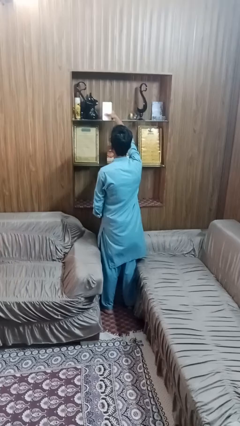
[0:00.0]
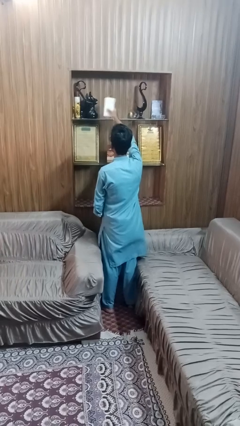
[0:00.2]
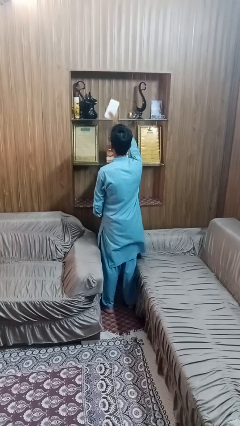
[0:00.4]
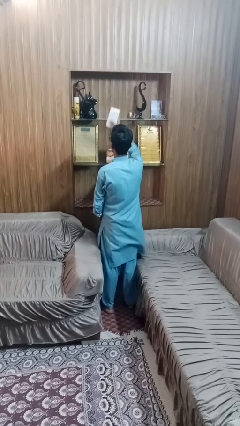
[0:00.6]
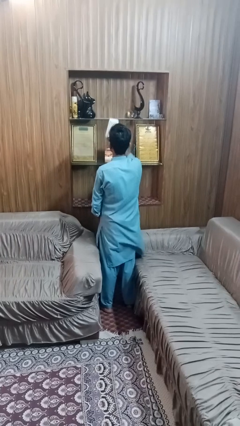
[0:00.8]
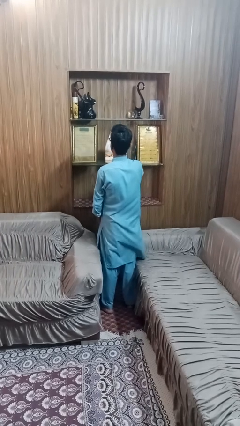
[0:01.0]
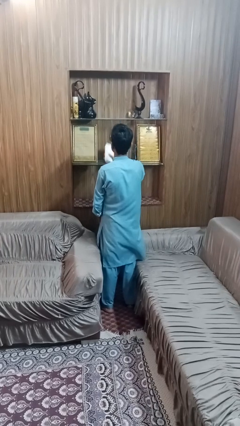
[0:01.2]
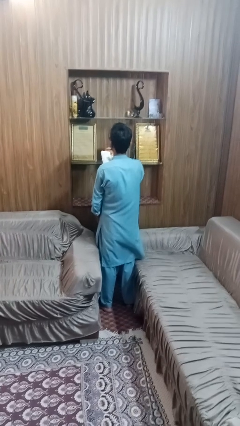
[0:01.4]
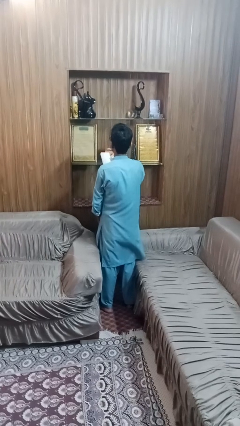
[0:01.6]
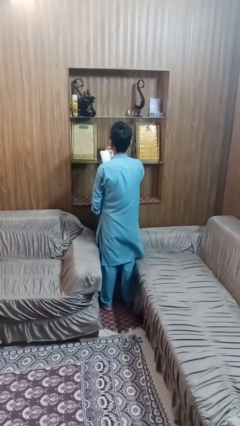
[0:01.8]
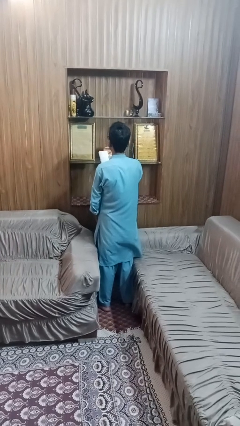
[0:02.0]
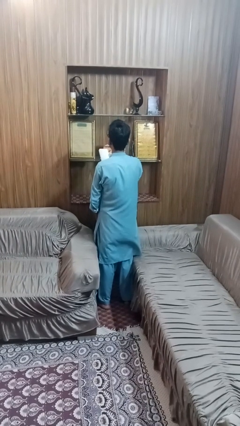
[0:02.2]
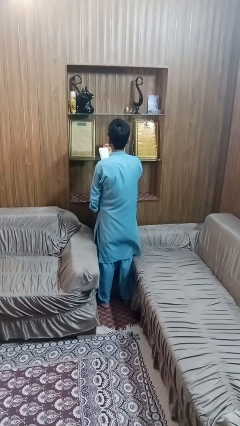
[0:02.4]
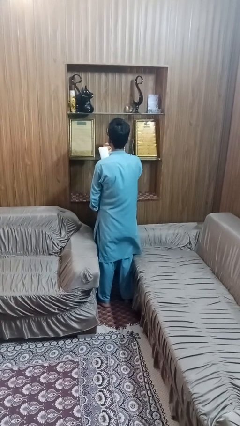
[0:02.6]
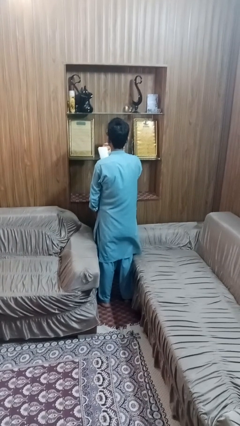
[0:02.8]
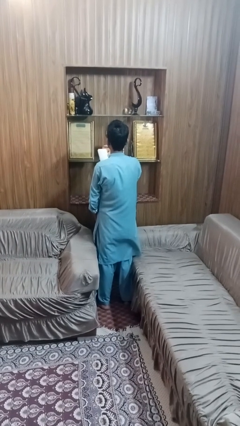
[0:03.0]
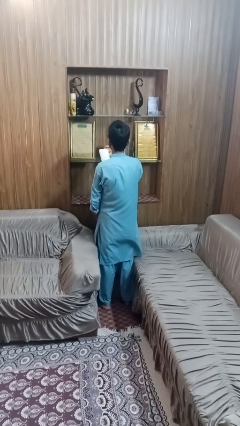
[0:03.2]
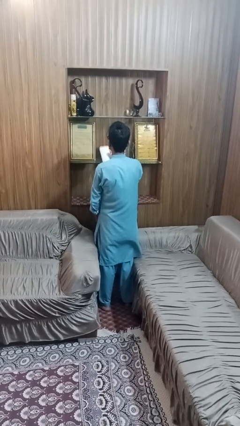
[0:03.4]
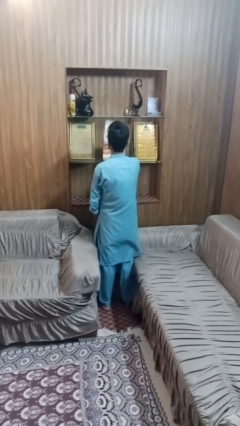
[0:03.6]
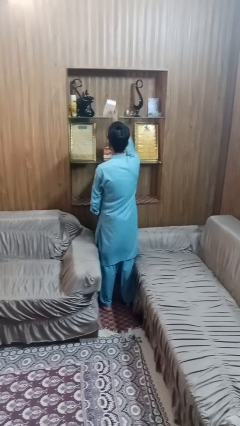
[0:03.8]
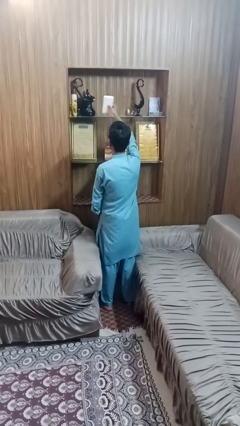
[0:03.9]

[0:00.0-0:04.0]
person picks up object from shelf

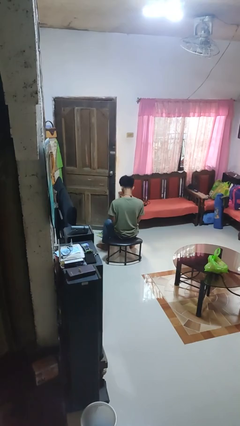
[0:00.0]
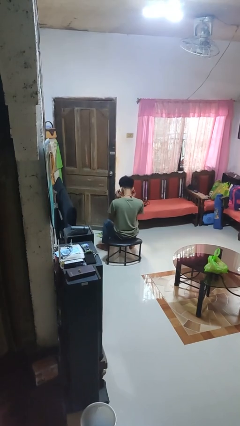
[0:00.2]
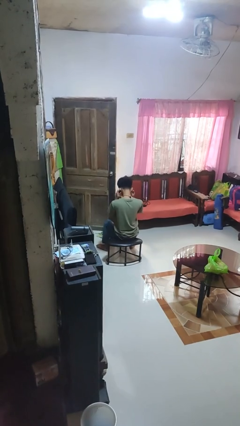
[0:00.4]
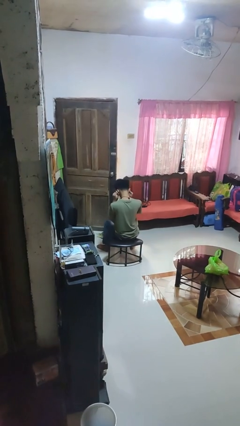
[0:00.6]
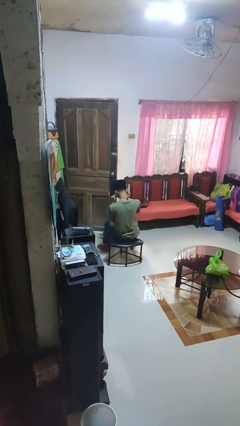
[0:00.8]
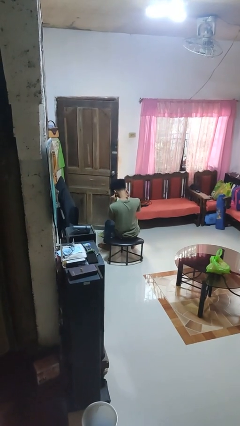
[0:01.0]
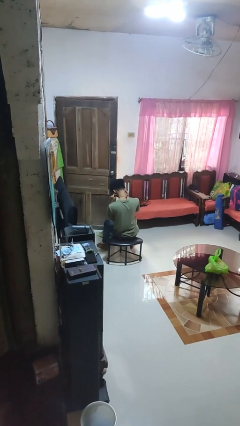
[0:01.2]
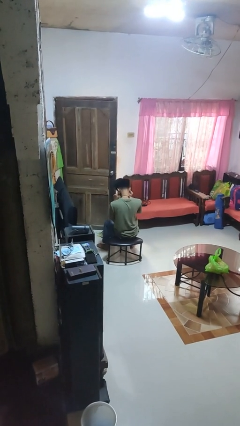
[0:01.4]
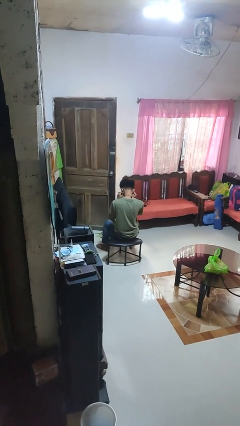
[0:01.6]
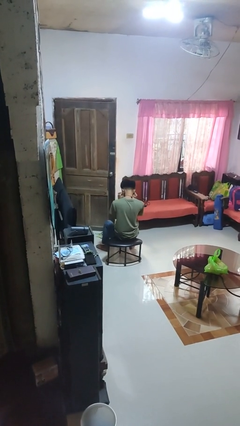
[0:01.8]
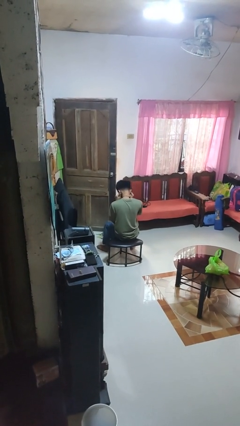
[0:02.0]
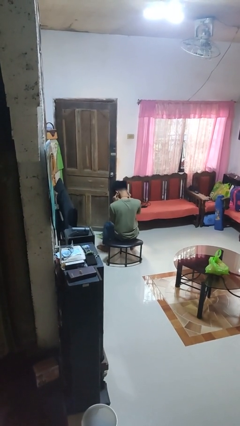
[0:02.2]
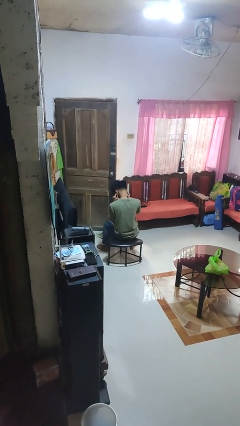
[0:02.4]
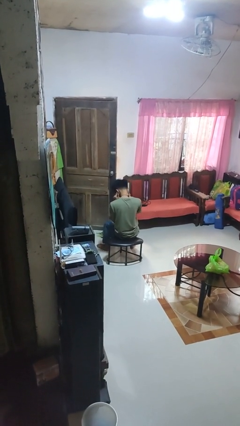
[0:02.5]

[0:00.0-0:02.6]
person puts fingers in ear

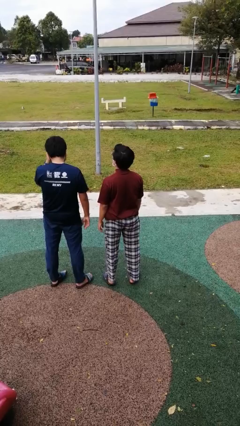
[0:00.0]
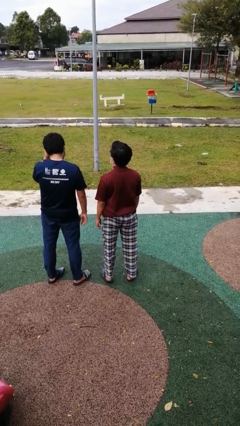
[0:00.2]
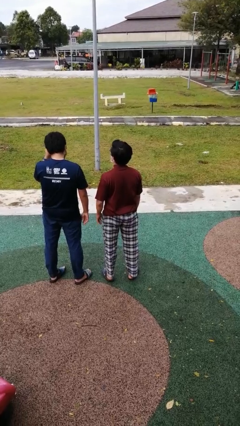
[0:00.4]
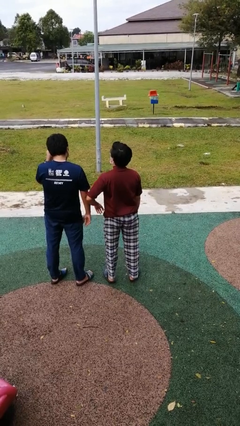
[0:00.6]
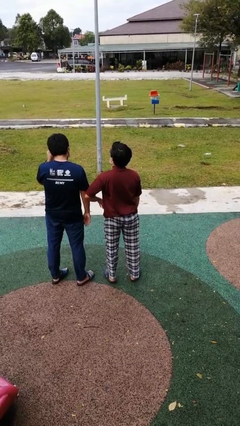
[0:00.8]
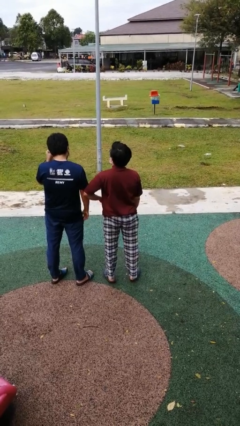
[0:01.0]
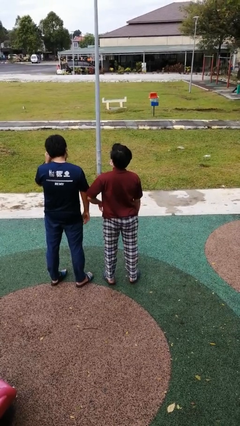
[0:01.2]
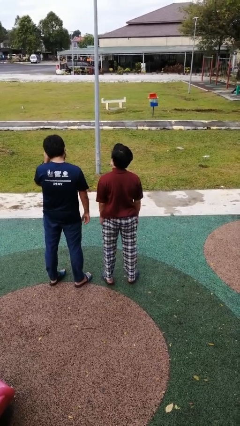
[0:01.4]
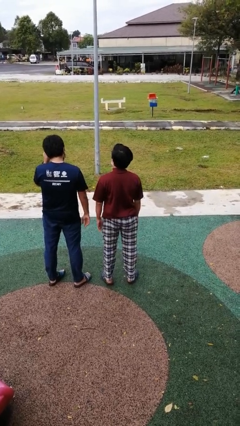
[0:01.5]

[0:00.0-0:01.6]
person nudges person with elbow

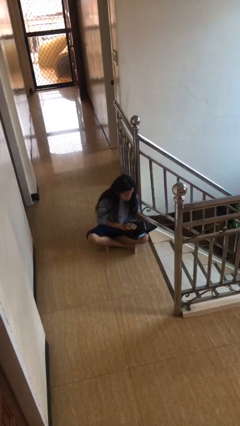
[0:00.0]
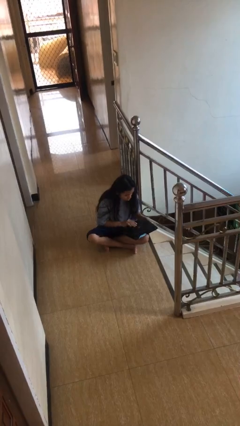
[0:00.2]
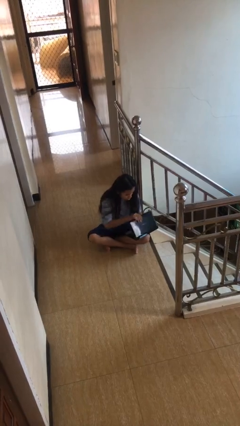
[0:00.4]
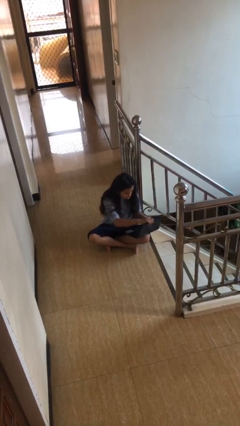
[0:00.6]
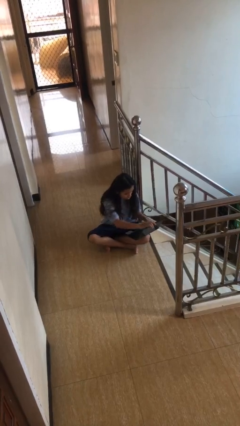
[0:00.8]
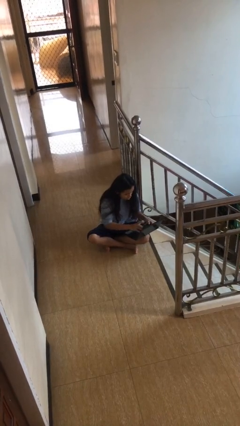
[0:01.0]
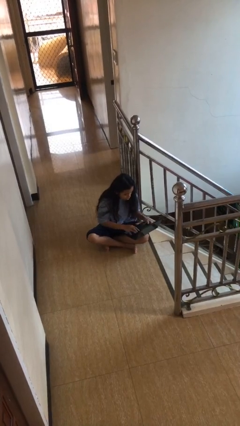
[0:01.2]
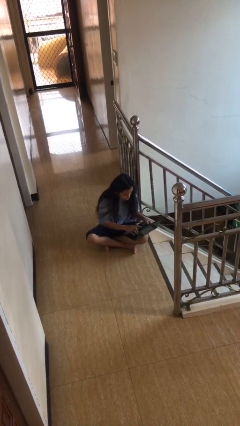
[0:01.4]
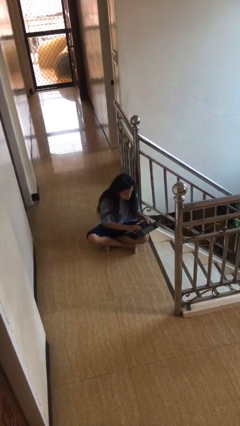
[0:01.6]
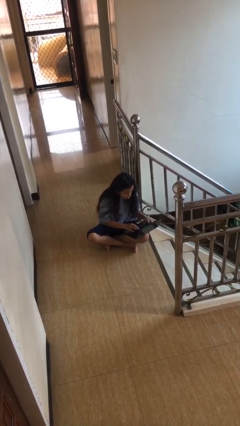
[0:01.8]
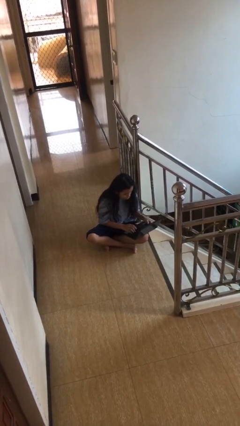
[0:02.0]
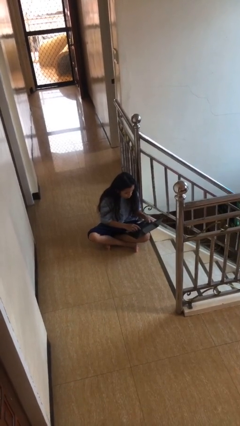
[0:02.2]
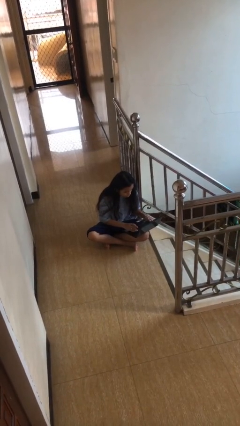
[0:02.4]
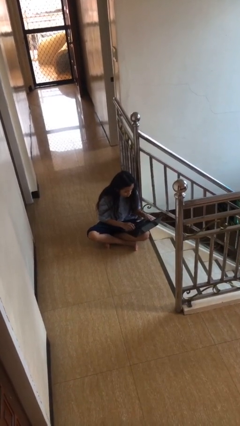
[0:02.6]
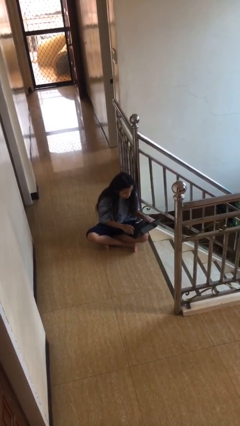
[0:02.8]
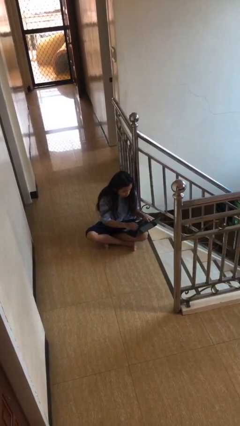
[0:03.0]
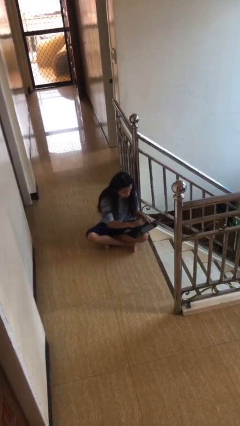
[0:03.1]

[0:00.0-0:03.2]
person interacts with laptop

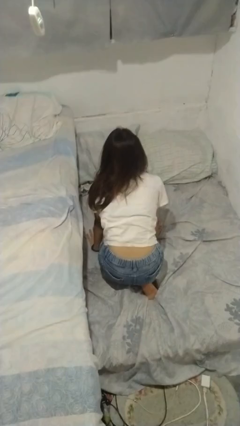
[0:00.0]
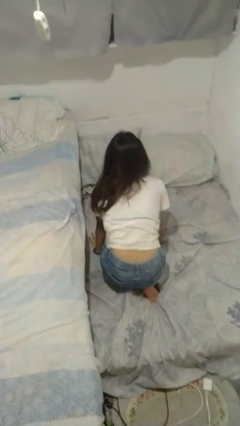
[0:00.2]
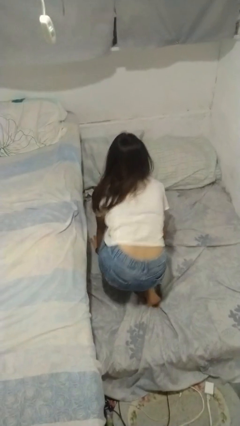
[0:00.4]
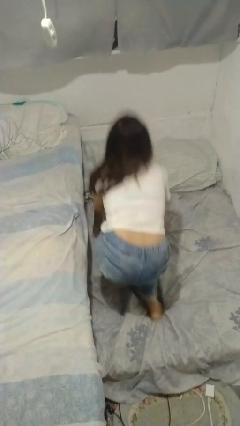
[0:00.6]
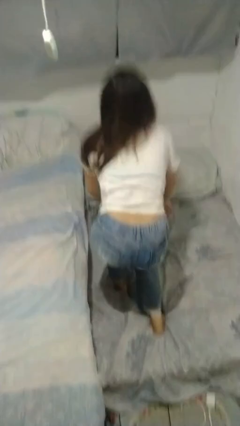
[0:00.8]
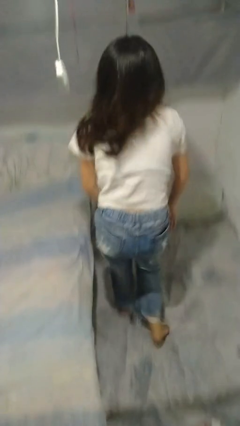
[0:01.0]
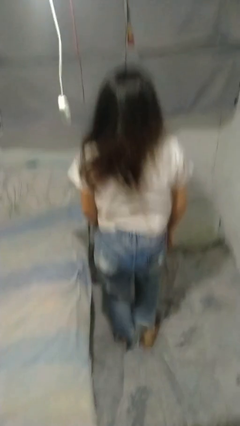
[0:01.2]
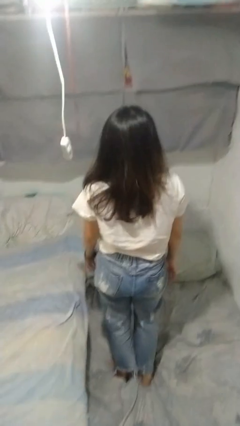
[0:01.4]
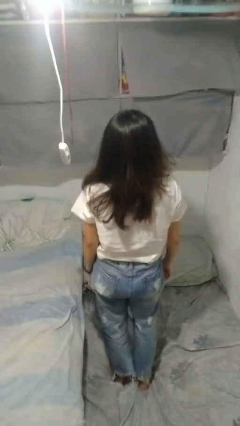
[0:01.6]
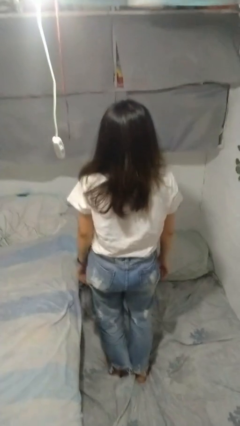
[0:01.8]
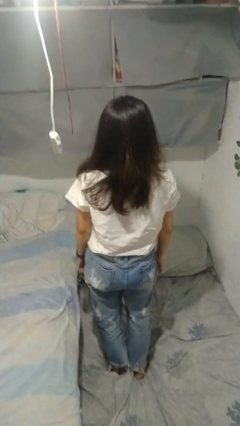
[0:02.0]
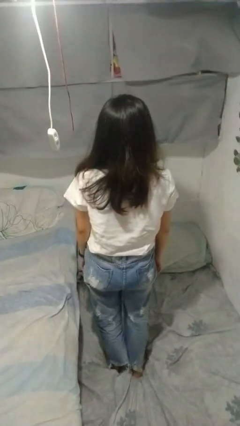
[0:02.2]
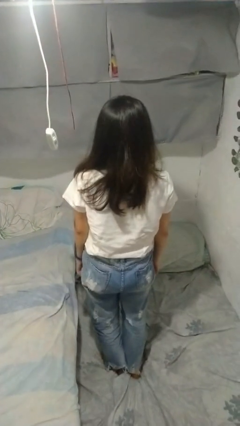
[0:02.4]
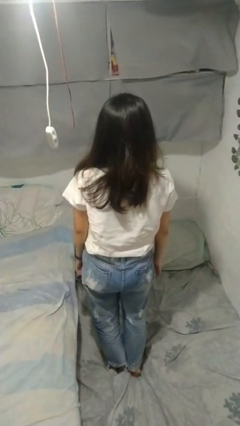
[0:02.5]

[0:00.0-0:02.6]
person stands up from floor

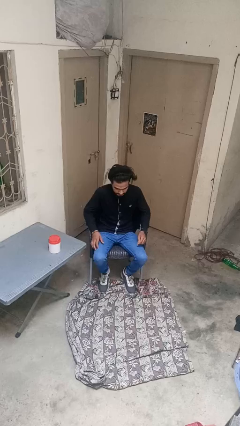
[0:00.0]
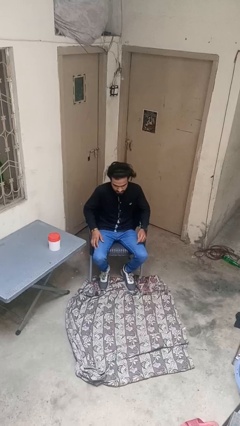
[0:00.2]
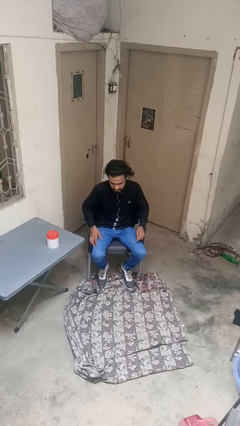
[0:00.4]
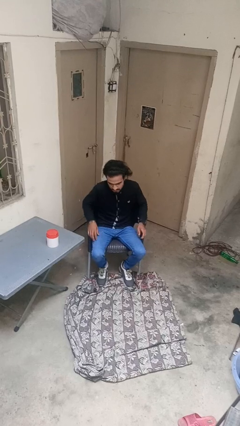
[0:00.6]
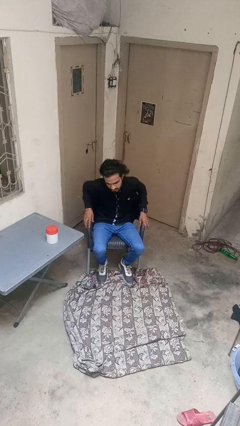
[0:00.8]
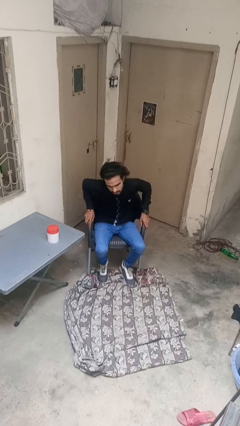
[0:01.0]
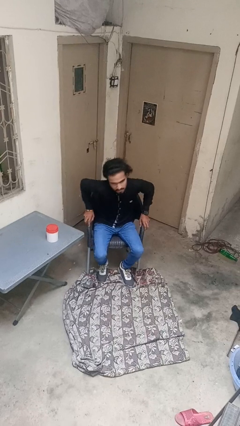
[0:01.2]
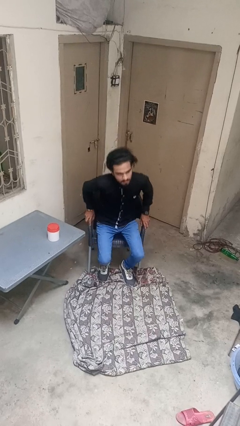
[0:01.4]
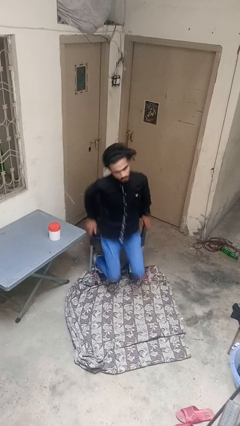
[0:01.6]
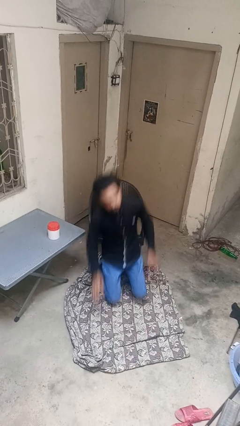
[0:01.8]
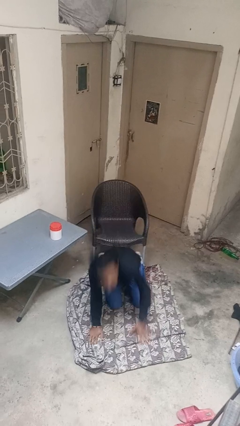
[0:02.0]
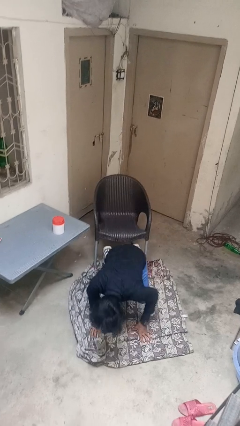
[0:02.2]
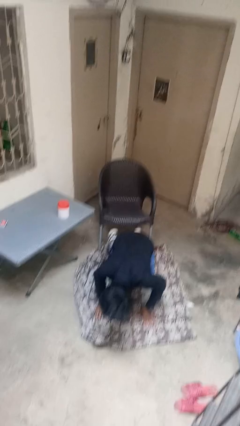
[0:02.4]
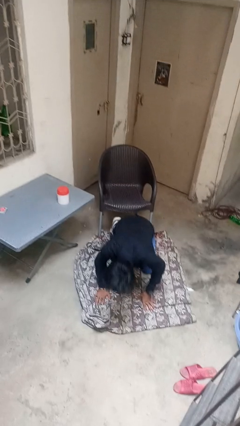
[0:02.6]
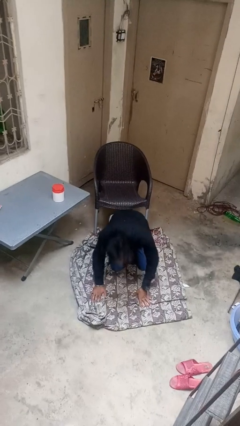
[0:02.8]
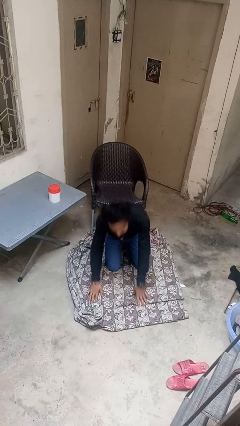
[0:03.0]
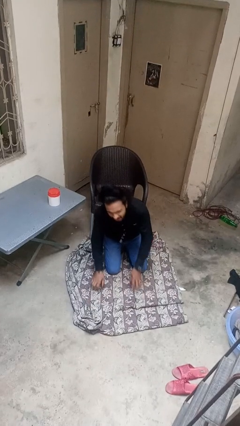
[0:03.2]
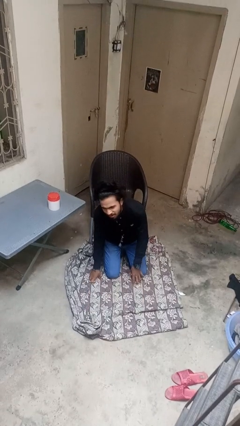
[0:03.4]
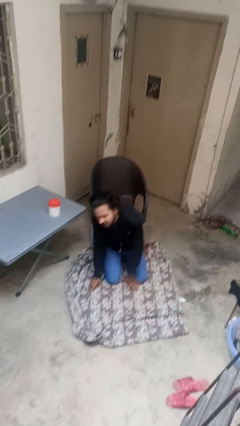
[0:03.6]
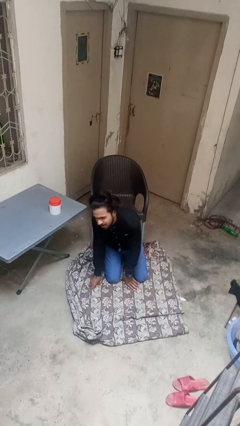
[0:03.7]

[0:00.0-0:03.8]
person falls from chair
